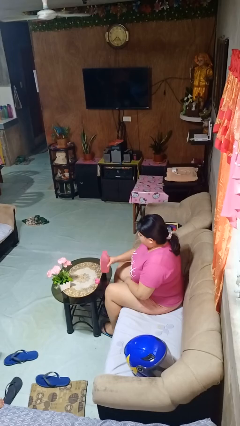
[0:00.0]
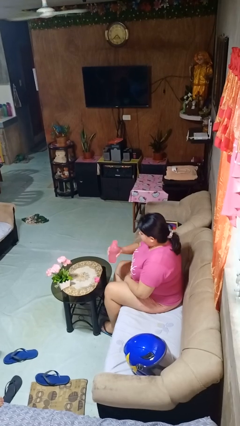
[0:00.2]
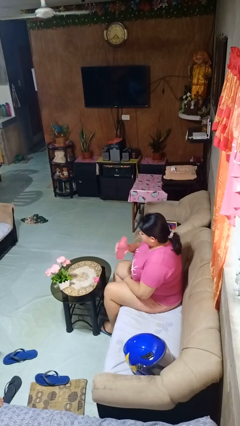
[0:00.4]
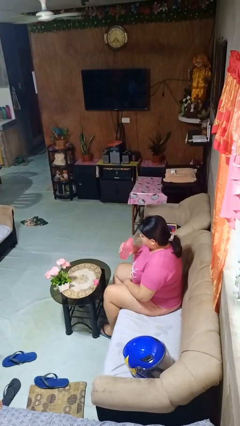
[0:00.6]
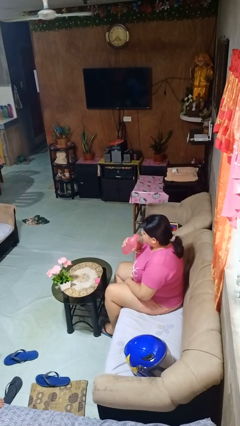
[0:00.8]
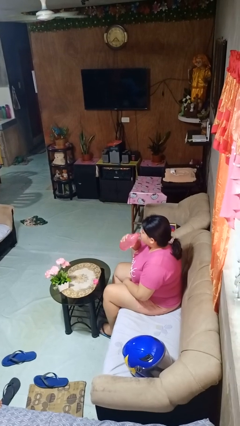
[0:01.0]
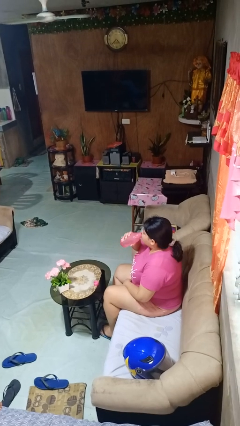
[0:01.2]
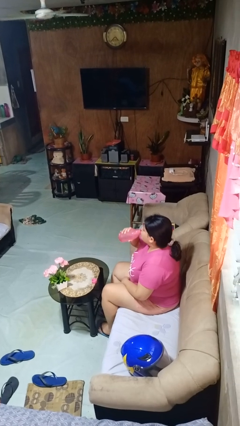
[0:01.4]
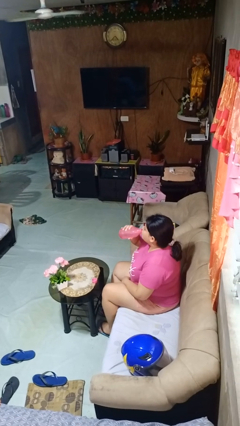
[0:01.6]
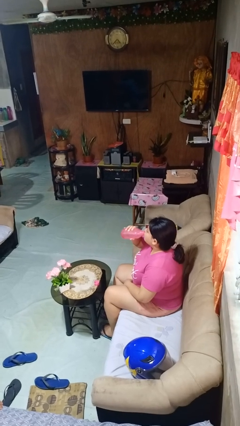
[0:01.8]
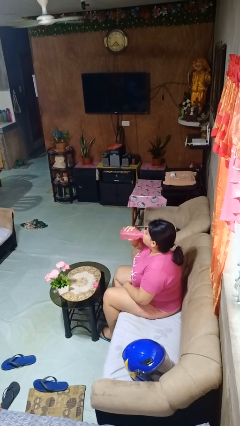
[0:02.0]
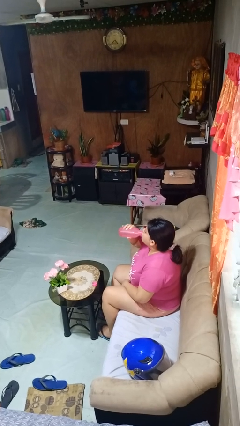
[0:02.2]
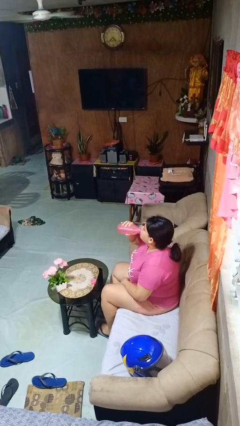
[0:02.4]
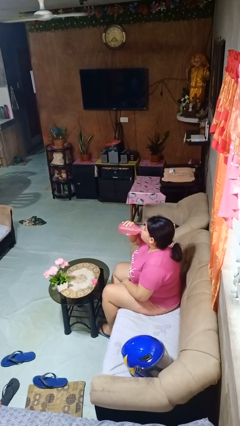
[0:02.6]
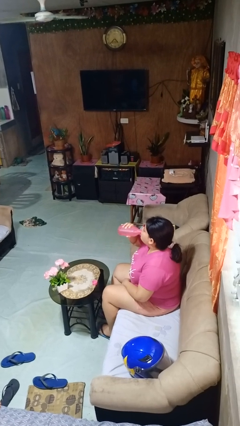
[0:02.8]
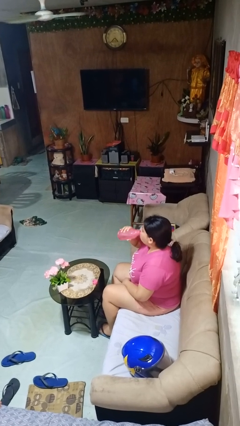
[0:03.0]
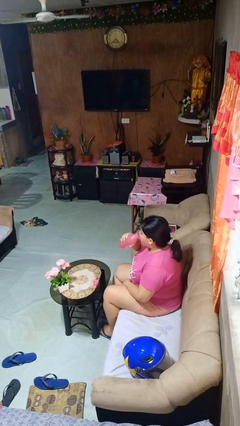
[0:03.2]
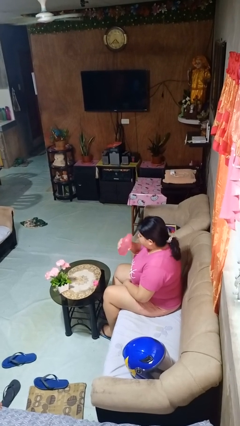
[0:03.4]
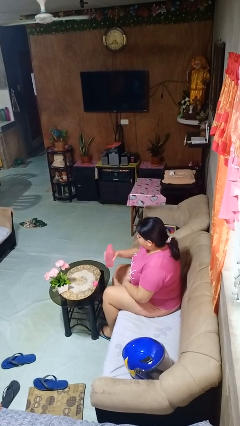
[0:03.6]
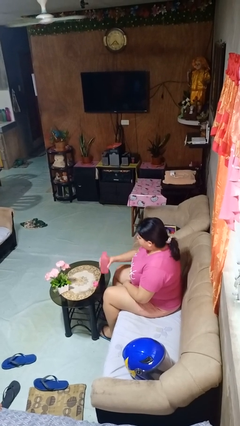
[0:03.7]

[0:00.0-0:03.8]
person drinks from bottle

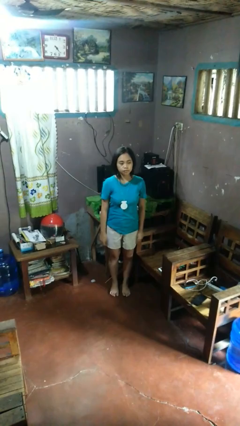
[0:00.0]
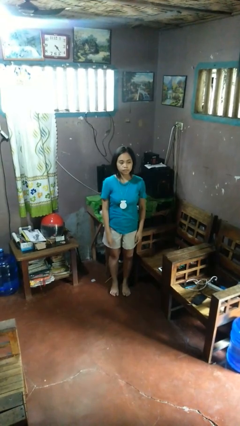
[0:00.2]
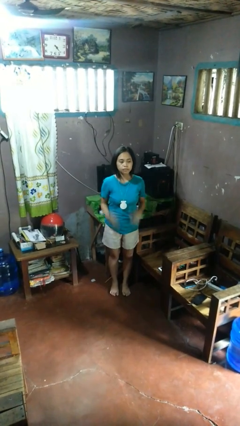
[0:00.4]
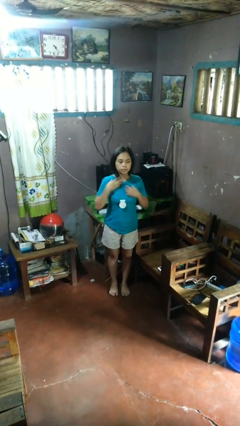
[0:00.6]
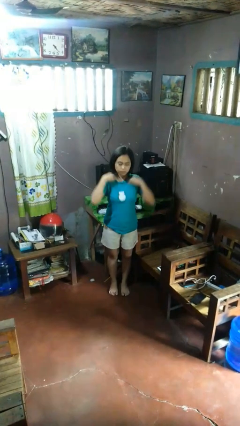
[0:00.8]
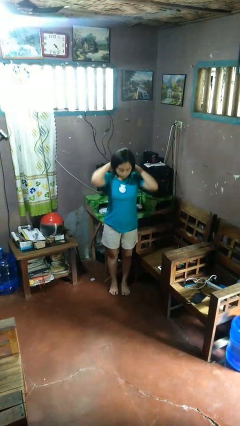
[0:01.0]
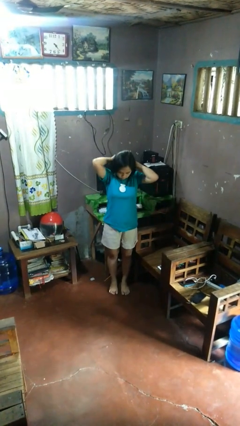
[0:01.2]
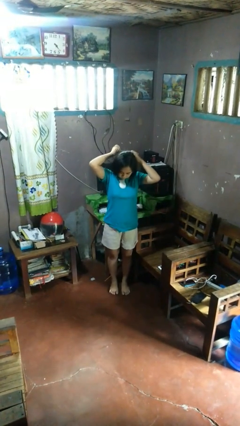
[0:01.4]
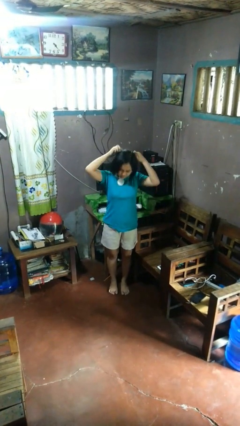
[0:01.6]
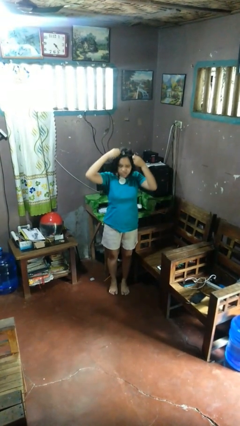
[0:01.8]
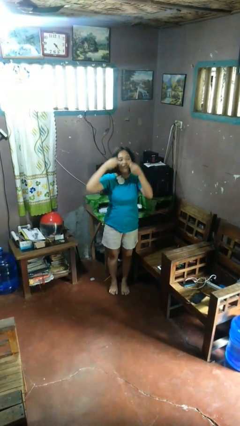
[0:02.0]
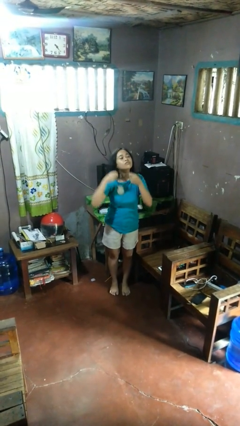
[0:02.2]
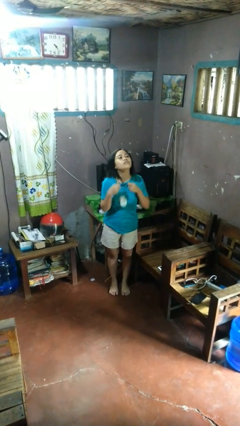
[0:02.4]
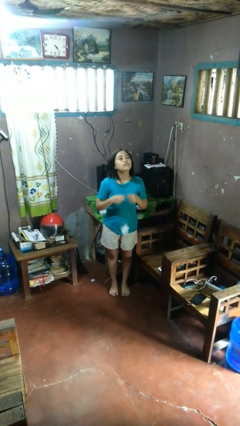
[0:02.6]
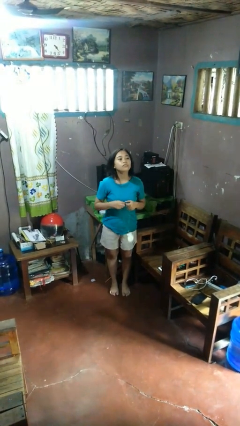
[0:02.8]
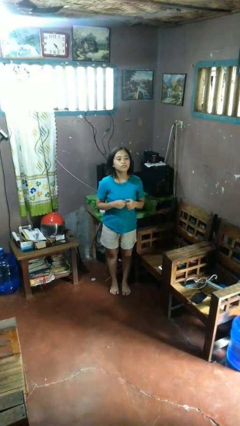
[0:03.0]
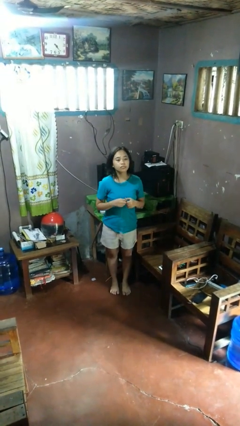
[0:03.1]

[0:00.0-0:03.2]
person takes off necklace

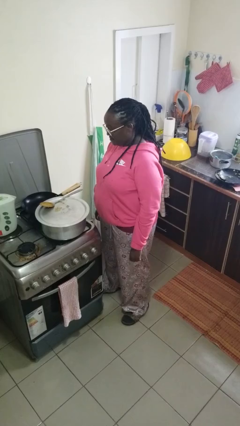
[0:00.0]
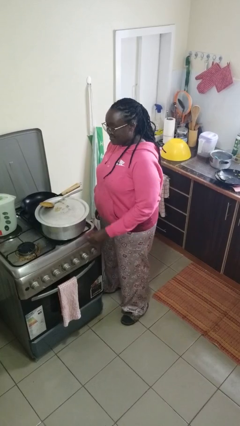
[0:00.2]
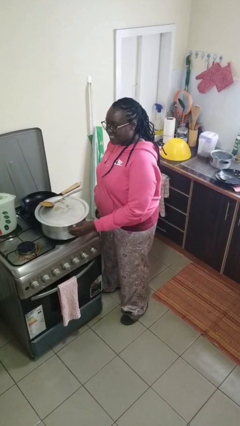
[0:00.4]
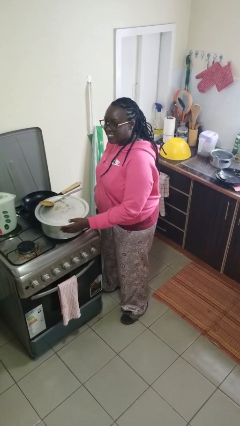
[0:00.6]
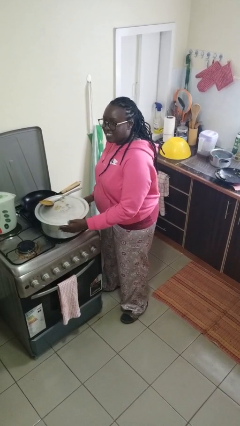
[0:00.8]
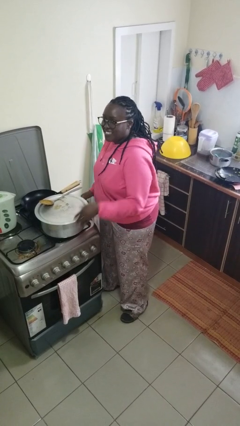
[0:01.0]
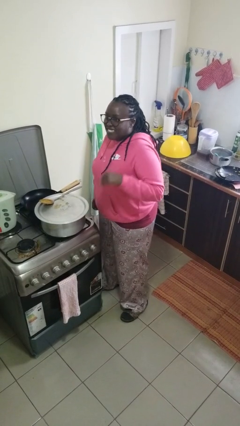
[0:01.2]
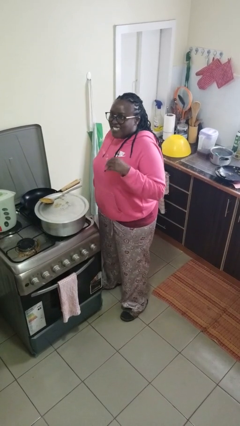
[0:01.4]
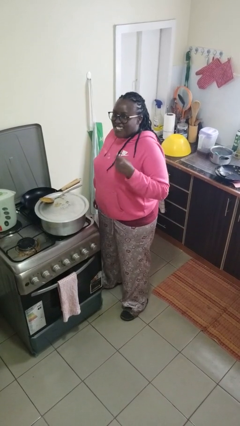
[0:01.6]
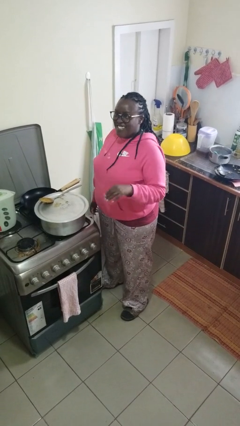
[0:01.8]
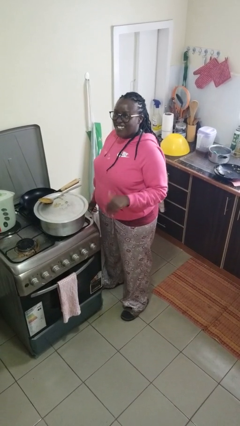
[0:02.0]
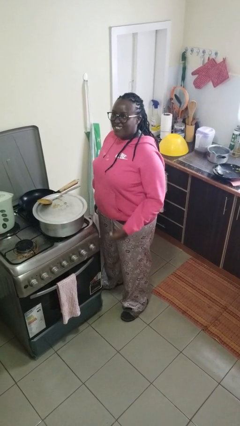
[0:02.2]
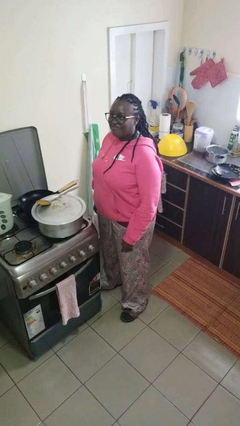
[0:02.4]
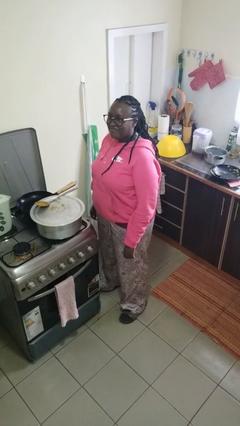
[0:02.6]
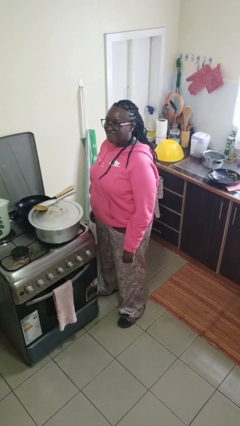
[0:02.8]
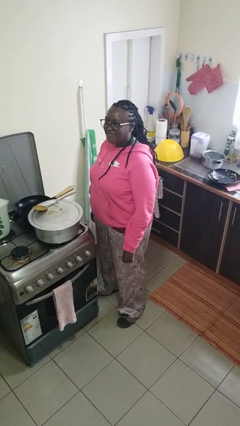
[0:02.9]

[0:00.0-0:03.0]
person burns hand

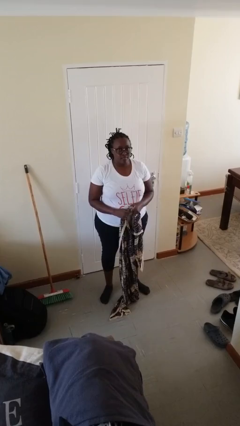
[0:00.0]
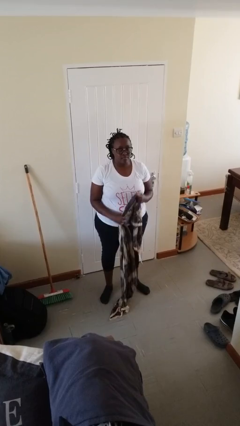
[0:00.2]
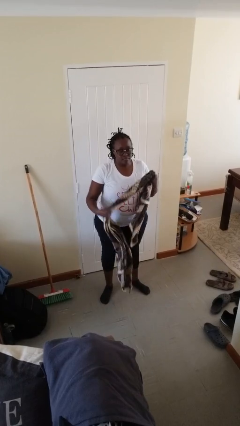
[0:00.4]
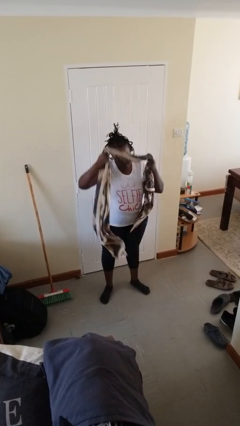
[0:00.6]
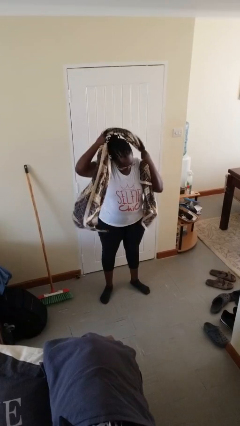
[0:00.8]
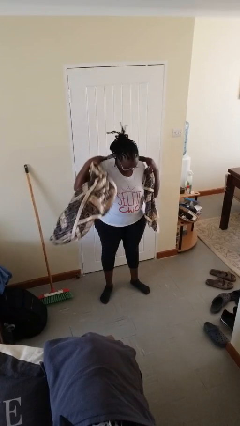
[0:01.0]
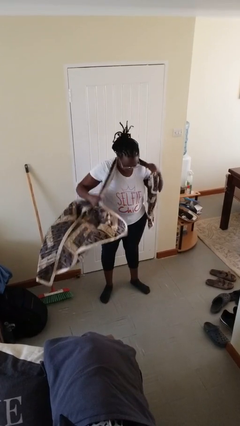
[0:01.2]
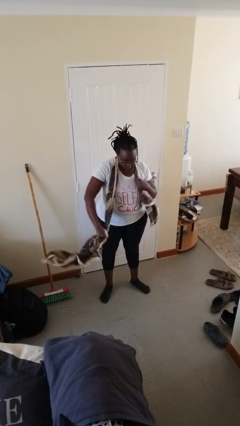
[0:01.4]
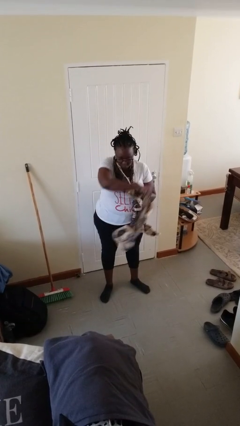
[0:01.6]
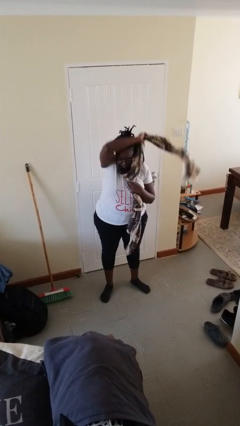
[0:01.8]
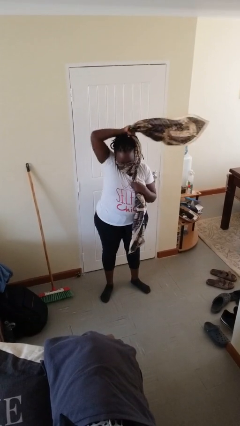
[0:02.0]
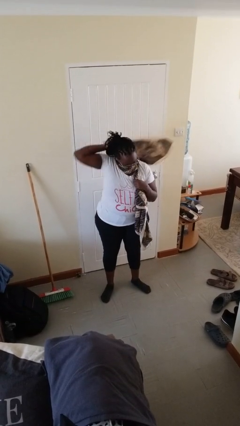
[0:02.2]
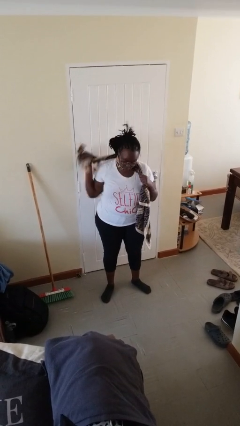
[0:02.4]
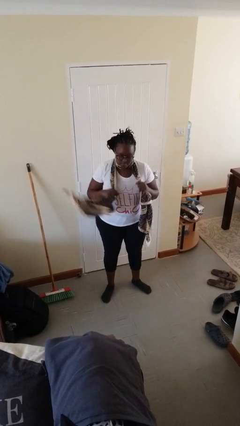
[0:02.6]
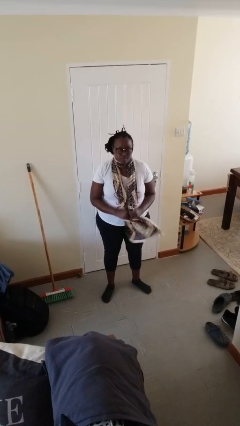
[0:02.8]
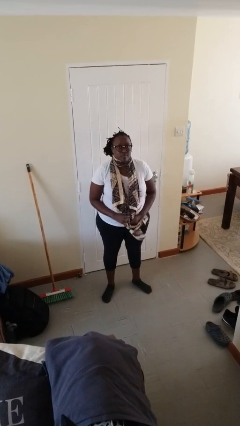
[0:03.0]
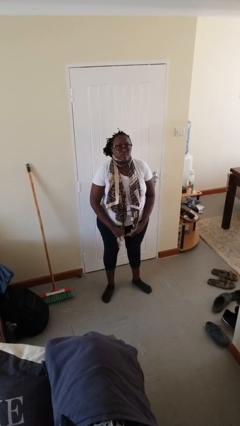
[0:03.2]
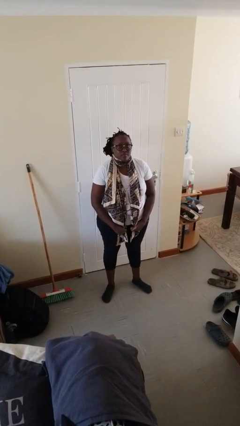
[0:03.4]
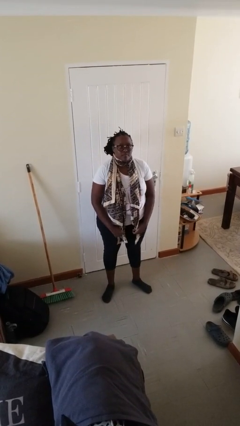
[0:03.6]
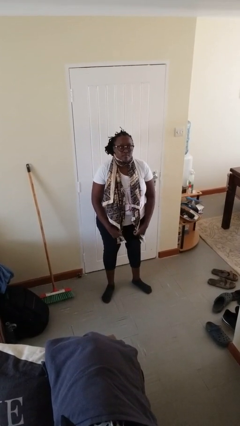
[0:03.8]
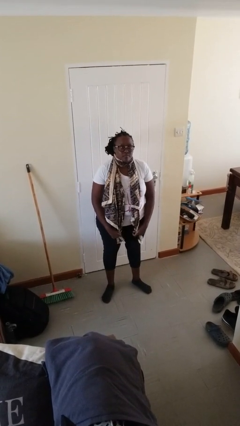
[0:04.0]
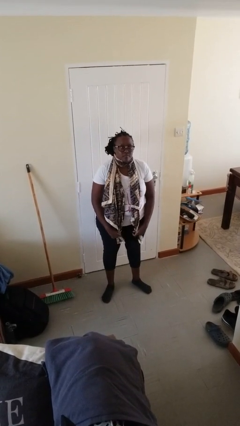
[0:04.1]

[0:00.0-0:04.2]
person puts on scarf

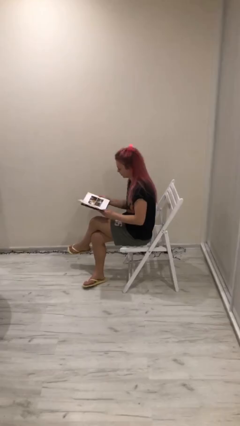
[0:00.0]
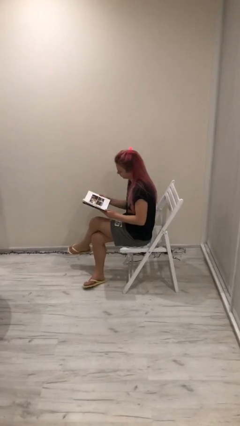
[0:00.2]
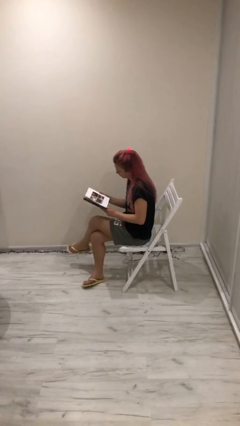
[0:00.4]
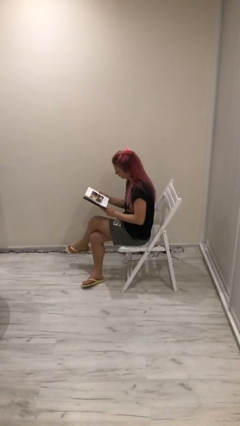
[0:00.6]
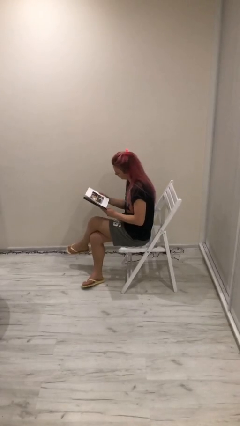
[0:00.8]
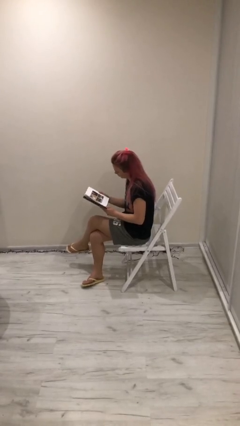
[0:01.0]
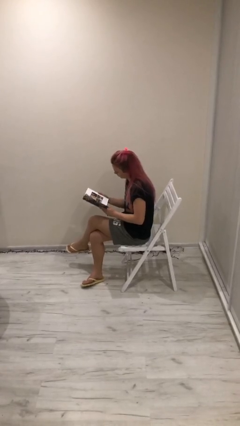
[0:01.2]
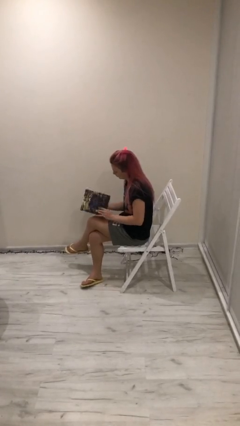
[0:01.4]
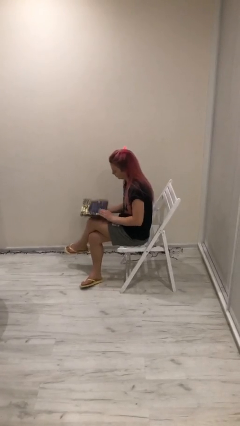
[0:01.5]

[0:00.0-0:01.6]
person reads document

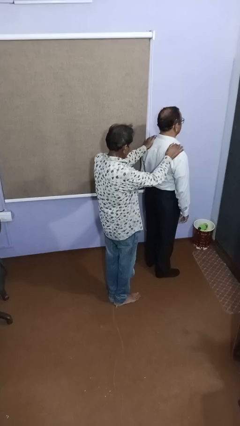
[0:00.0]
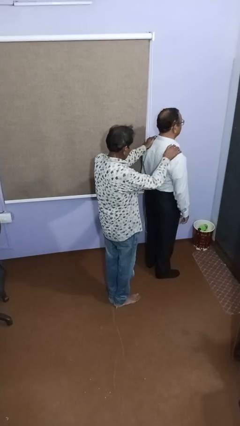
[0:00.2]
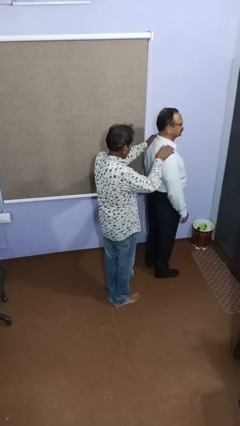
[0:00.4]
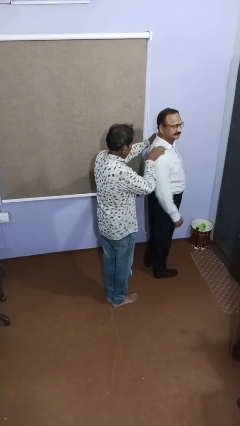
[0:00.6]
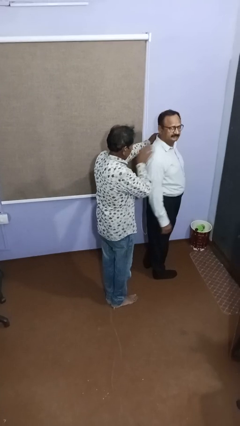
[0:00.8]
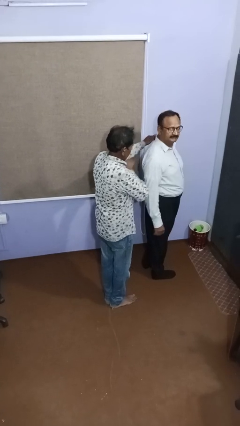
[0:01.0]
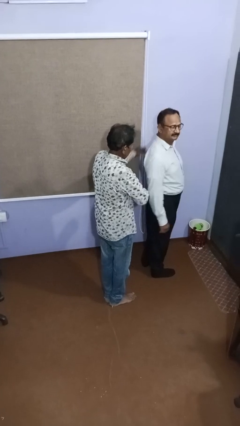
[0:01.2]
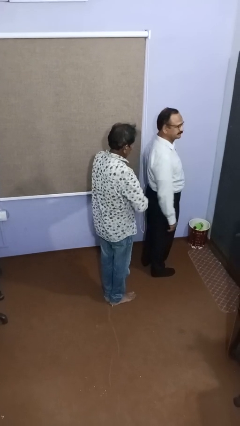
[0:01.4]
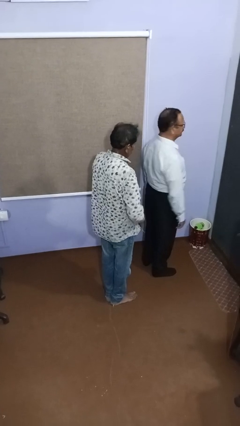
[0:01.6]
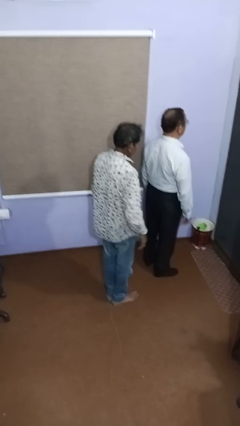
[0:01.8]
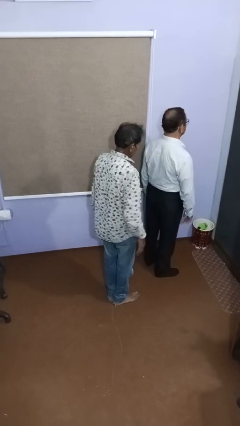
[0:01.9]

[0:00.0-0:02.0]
person spins person around
